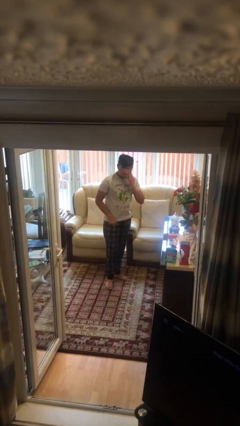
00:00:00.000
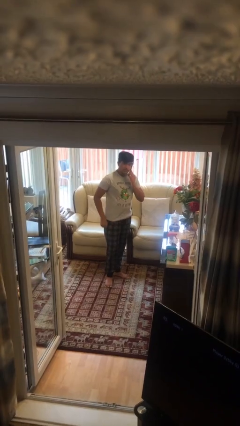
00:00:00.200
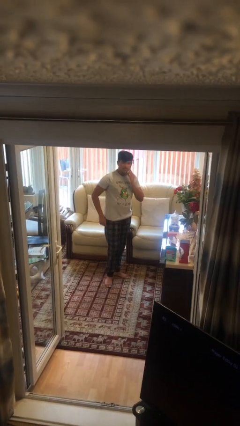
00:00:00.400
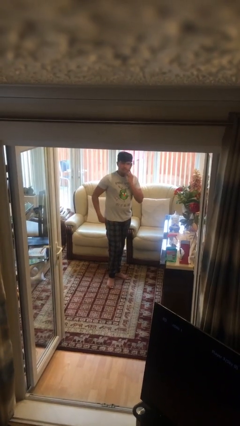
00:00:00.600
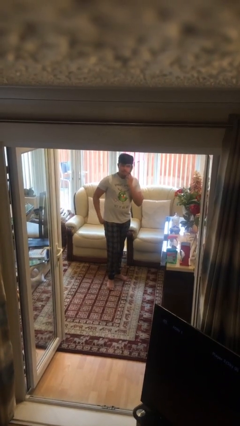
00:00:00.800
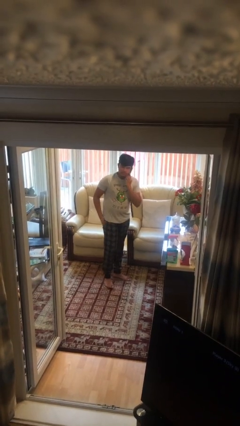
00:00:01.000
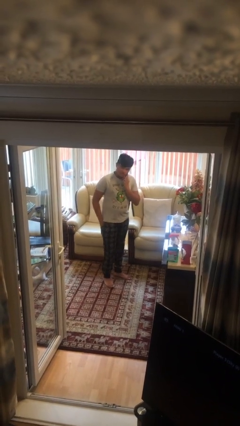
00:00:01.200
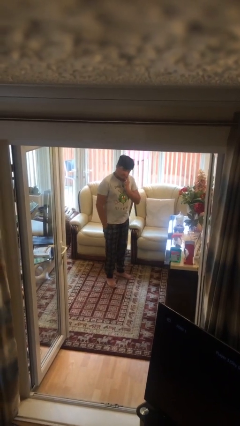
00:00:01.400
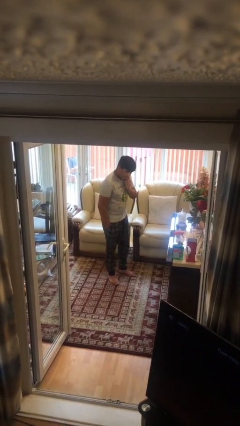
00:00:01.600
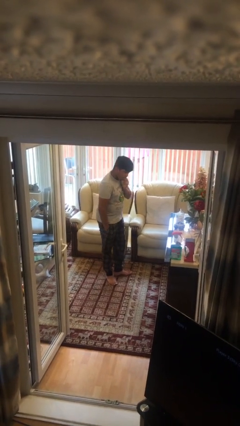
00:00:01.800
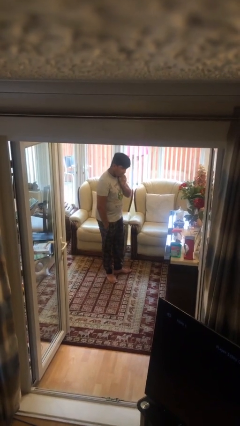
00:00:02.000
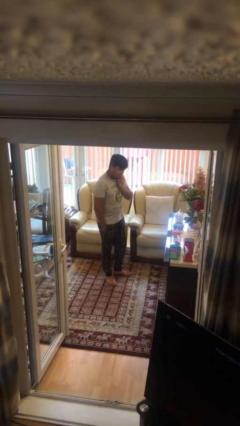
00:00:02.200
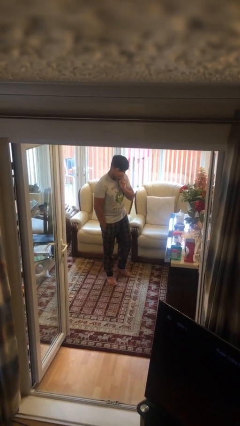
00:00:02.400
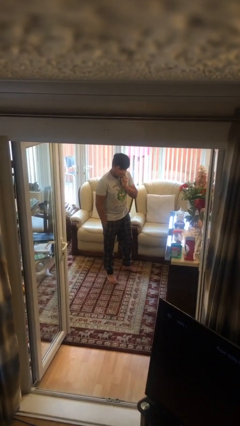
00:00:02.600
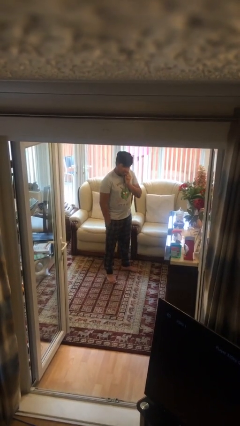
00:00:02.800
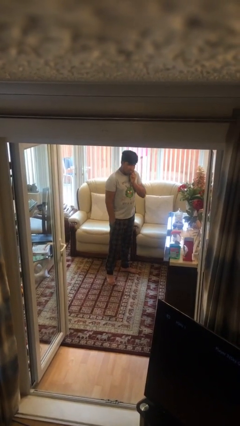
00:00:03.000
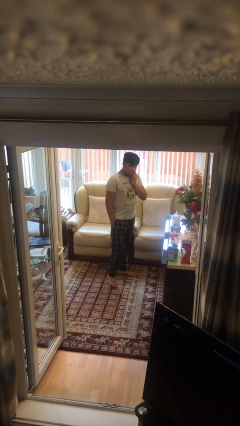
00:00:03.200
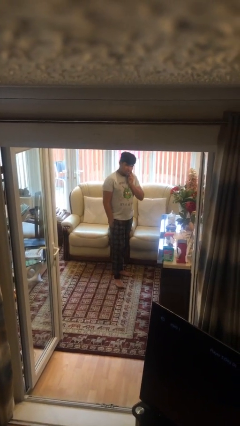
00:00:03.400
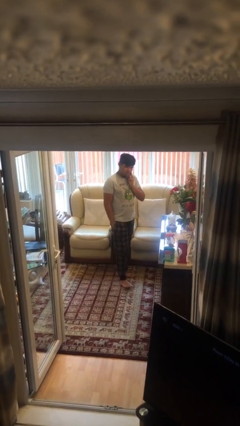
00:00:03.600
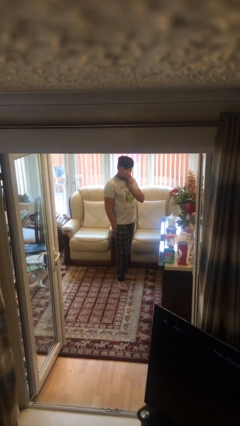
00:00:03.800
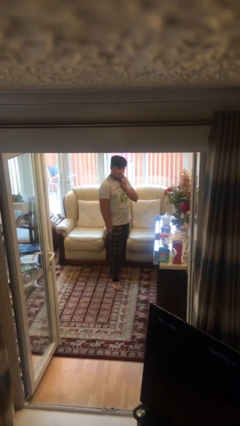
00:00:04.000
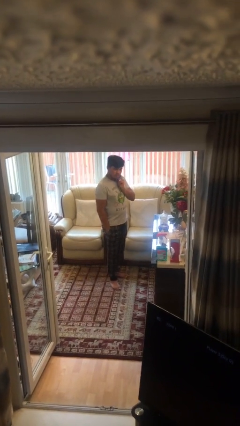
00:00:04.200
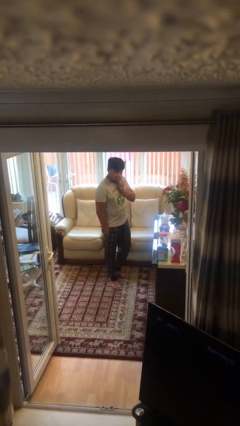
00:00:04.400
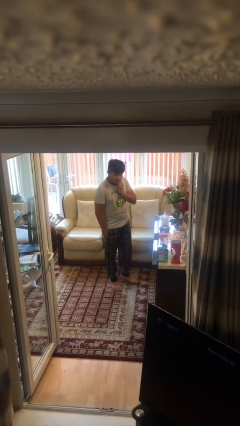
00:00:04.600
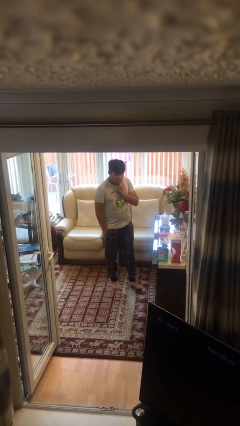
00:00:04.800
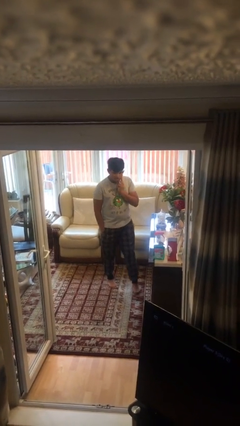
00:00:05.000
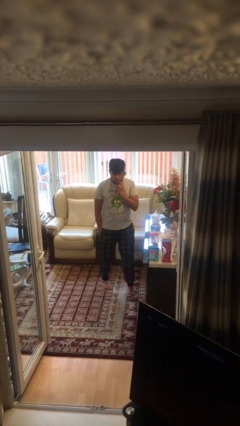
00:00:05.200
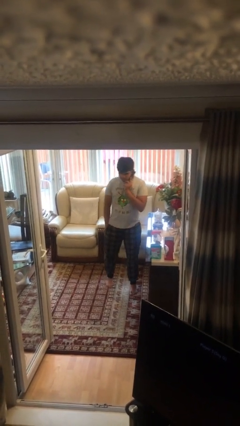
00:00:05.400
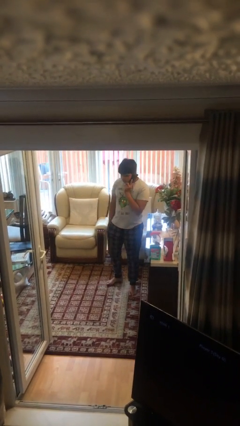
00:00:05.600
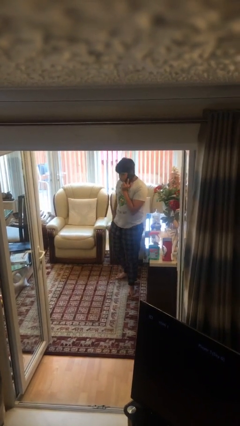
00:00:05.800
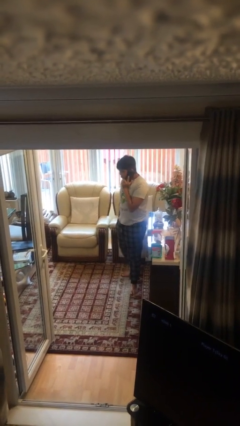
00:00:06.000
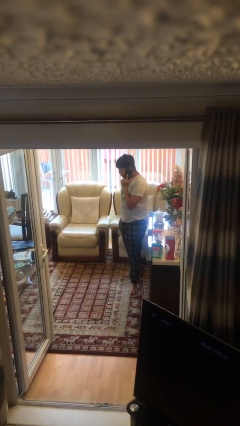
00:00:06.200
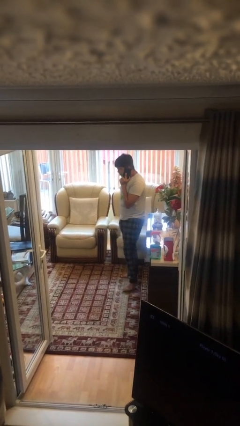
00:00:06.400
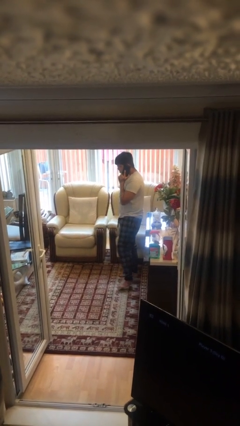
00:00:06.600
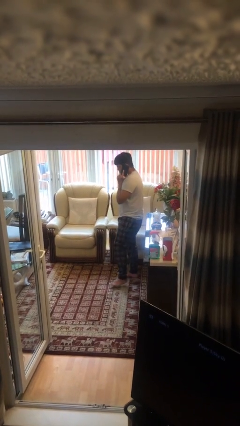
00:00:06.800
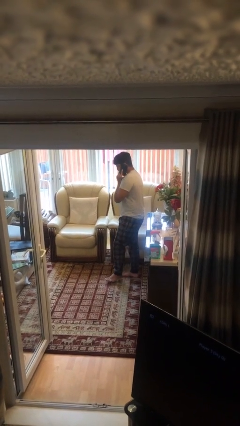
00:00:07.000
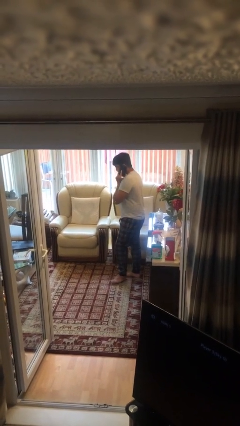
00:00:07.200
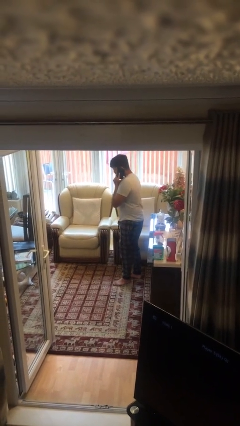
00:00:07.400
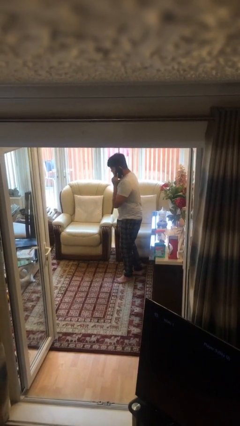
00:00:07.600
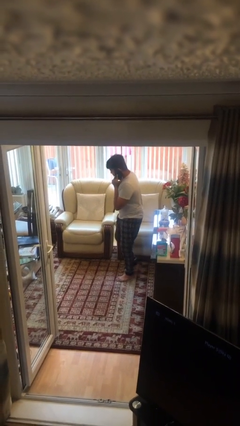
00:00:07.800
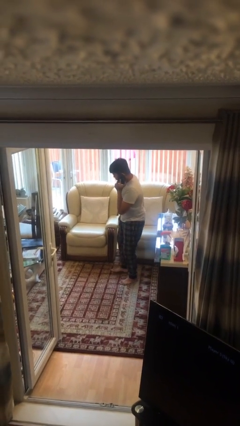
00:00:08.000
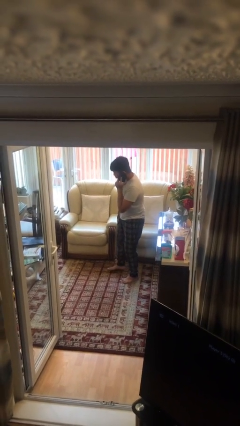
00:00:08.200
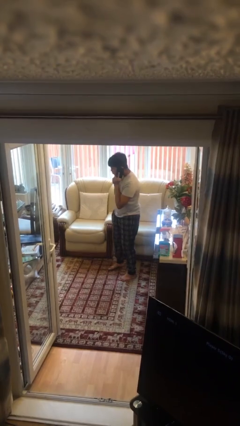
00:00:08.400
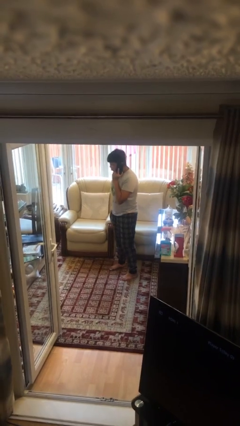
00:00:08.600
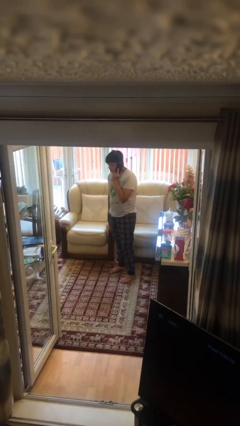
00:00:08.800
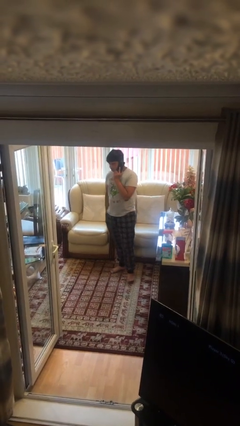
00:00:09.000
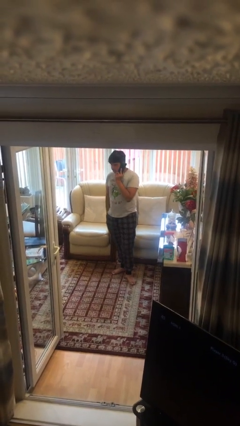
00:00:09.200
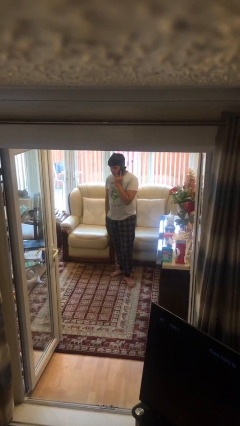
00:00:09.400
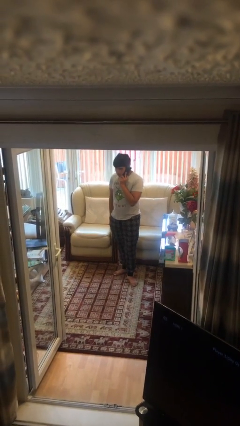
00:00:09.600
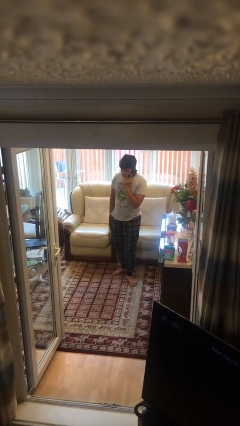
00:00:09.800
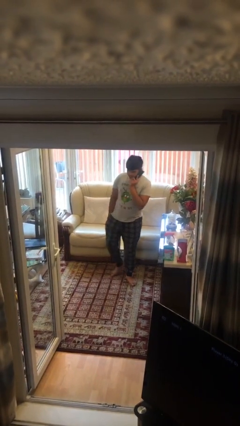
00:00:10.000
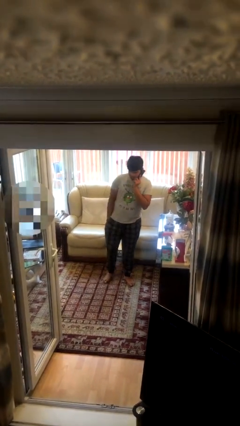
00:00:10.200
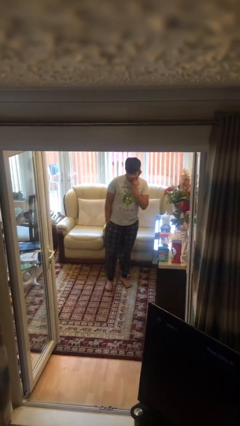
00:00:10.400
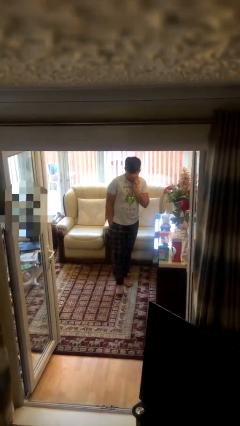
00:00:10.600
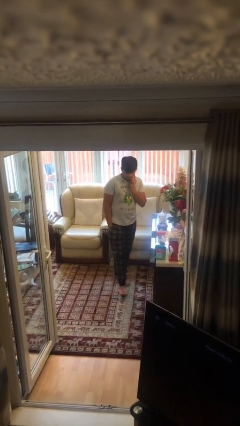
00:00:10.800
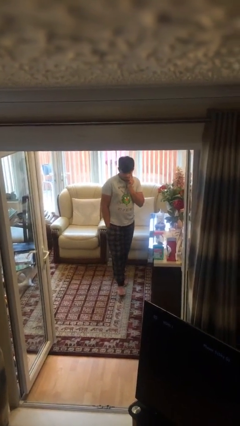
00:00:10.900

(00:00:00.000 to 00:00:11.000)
person talks on phone

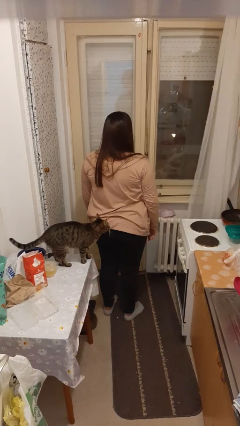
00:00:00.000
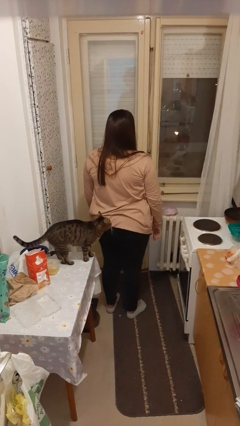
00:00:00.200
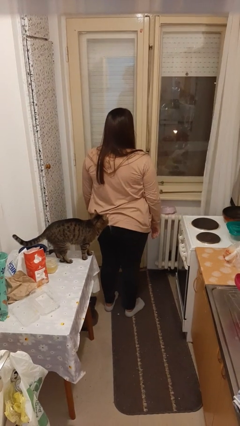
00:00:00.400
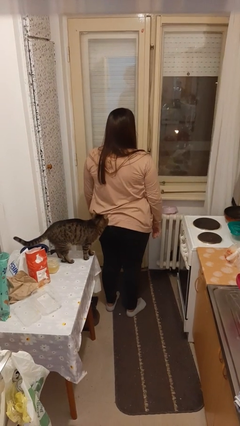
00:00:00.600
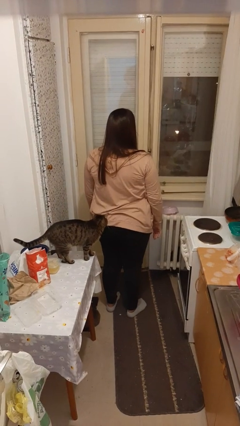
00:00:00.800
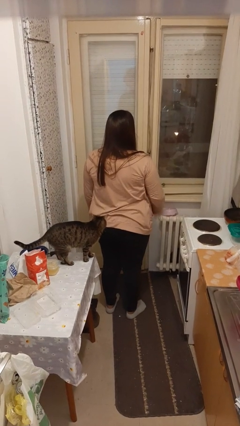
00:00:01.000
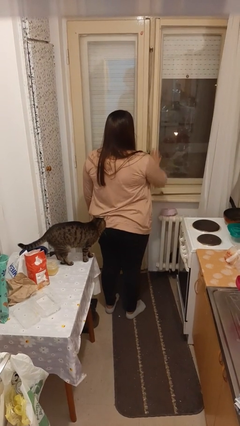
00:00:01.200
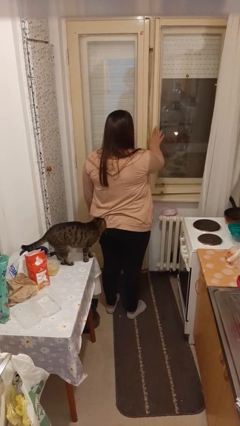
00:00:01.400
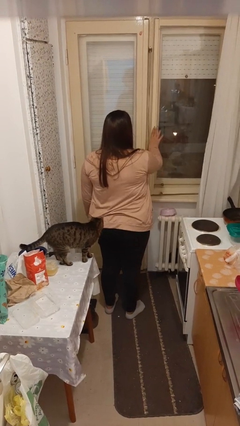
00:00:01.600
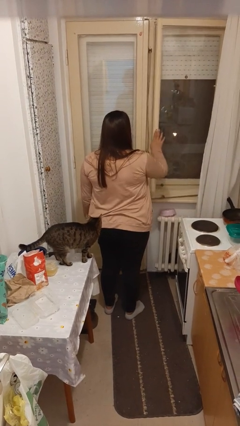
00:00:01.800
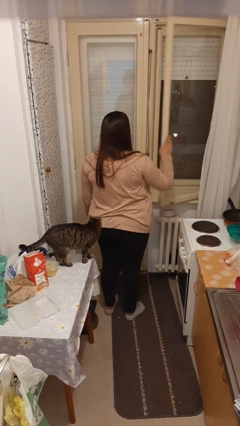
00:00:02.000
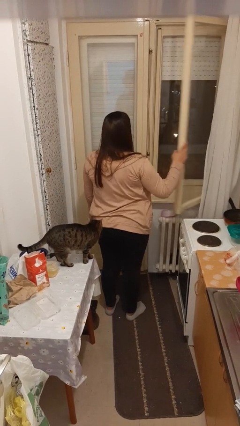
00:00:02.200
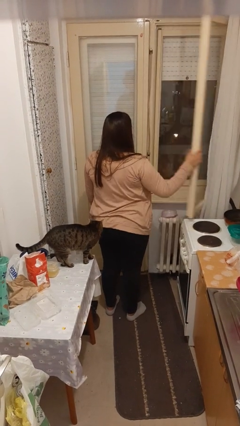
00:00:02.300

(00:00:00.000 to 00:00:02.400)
person opens home window

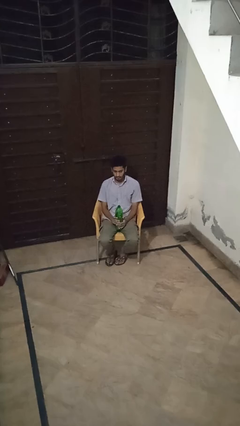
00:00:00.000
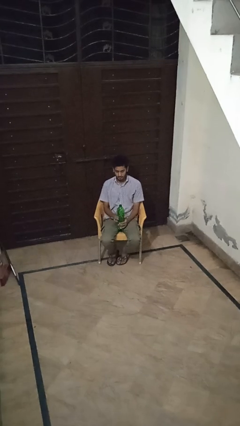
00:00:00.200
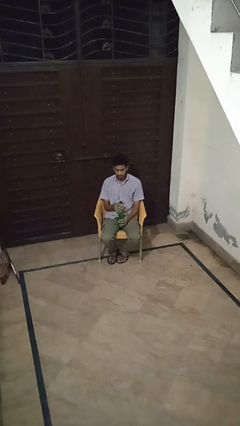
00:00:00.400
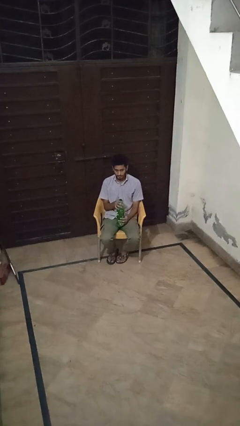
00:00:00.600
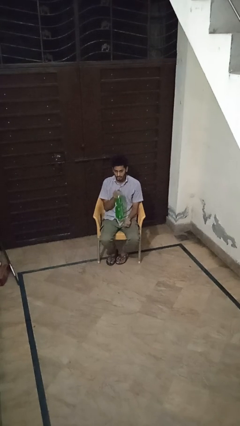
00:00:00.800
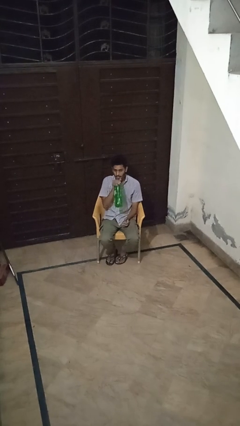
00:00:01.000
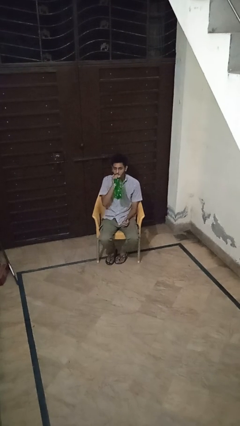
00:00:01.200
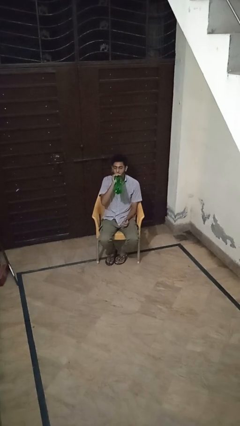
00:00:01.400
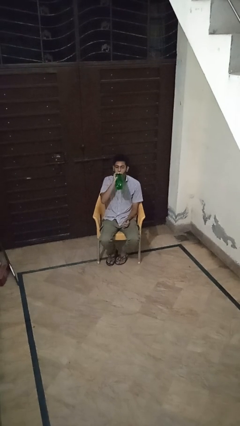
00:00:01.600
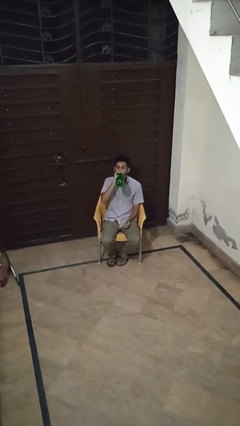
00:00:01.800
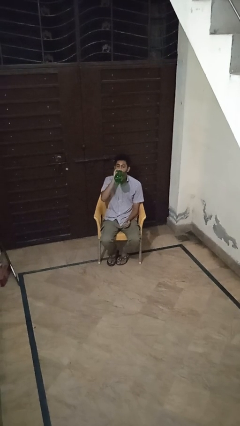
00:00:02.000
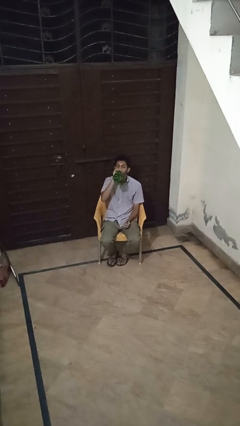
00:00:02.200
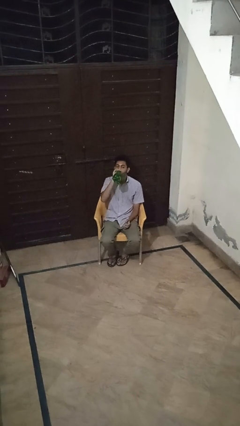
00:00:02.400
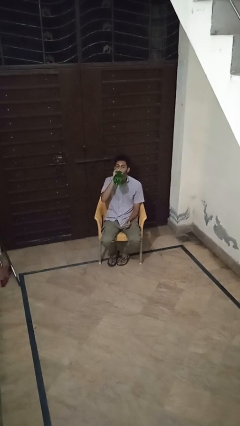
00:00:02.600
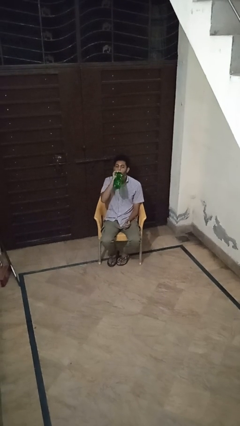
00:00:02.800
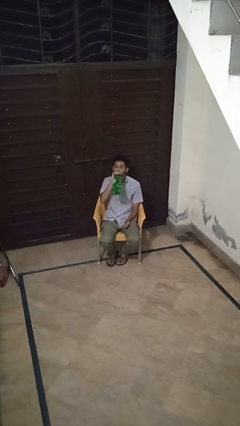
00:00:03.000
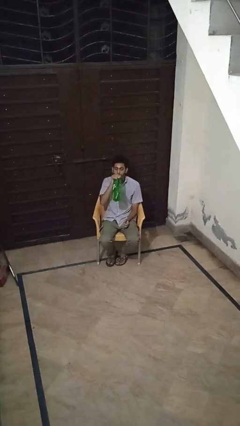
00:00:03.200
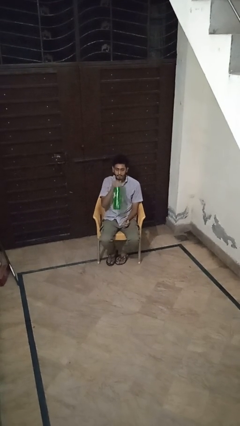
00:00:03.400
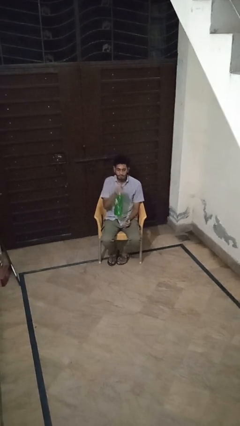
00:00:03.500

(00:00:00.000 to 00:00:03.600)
person drinks from bottle

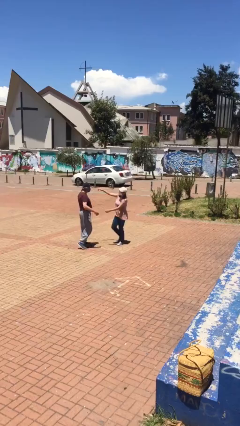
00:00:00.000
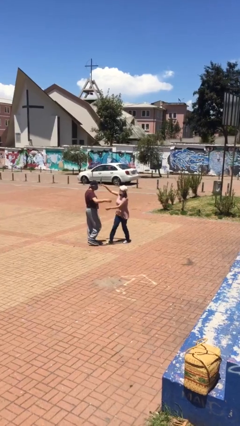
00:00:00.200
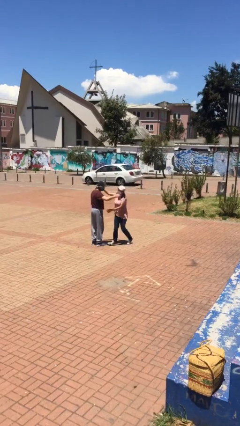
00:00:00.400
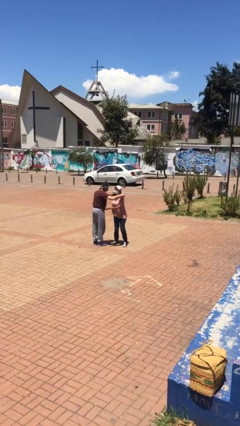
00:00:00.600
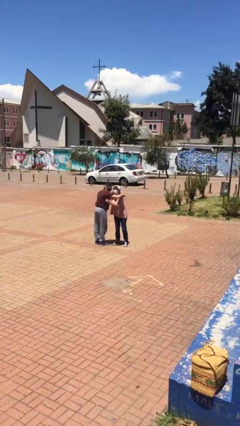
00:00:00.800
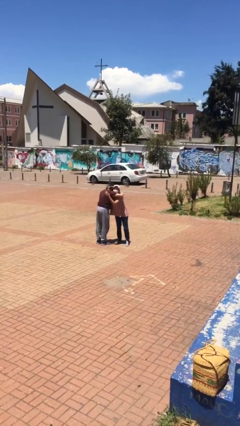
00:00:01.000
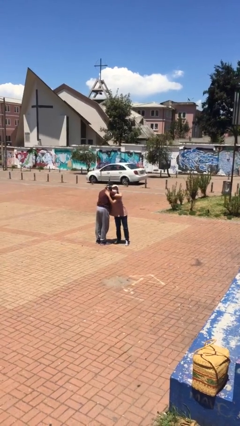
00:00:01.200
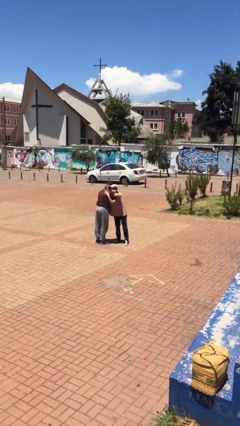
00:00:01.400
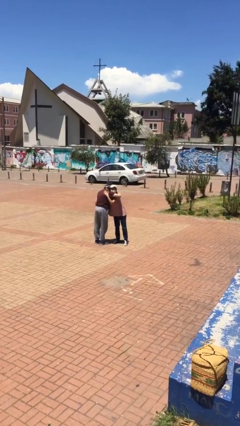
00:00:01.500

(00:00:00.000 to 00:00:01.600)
person embraces person
